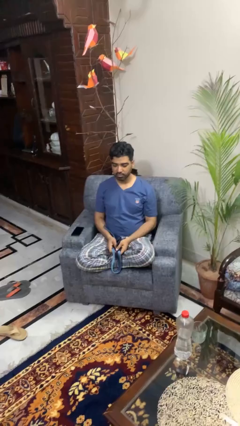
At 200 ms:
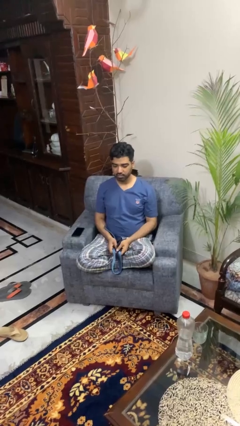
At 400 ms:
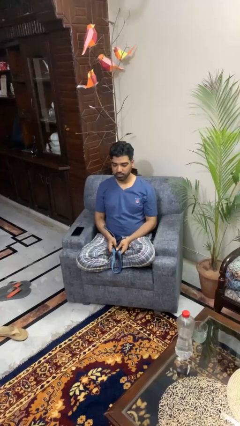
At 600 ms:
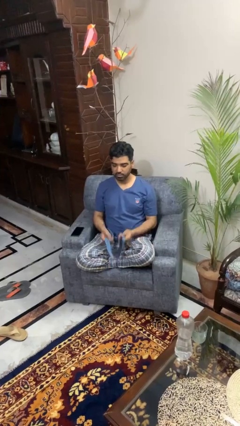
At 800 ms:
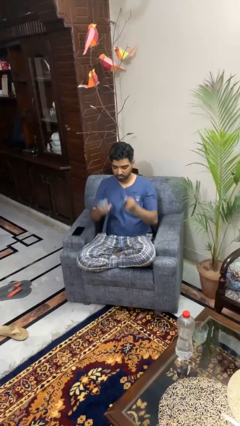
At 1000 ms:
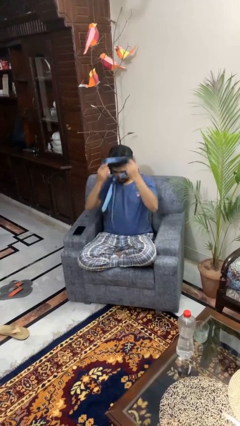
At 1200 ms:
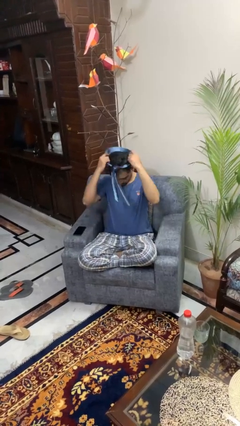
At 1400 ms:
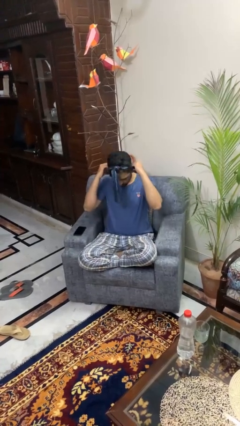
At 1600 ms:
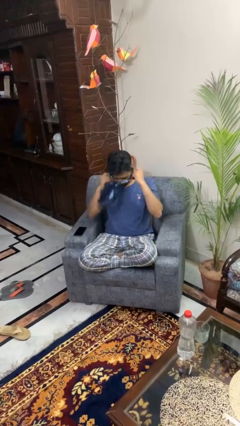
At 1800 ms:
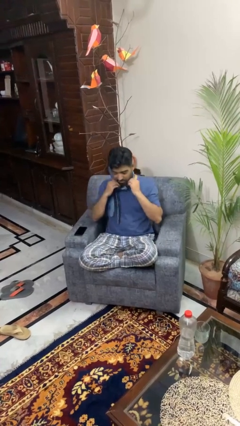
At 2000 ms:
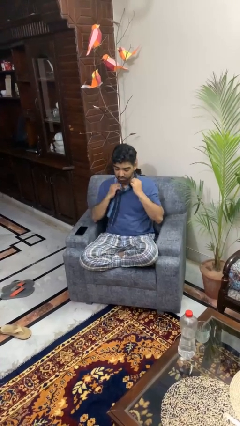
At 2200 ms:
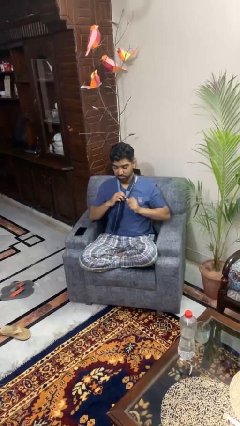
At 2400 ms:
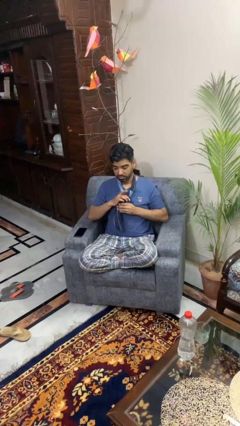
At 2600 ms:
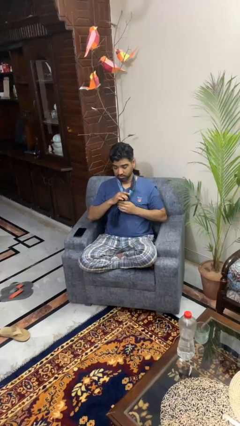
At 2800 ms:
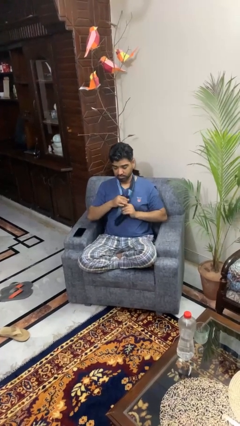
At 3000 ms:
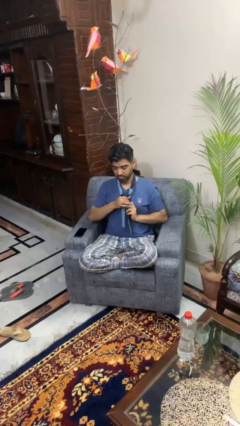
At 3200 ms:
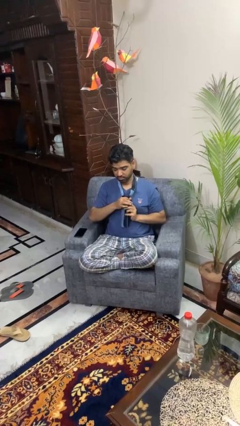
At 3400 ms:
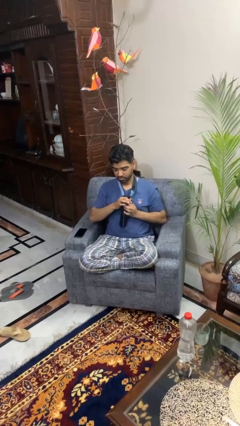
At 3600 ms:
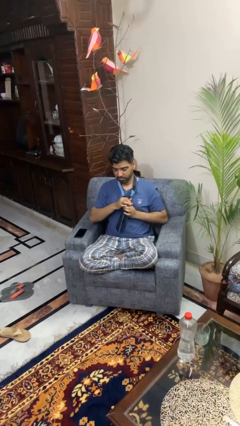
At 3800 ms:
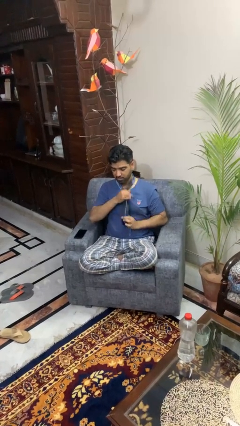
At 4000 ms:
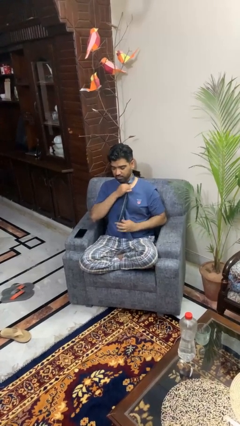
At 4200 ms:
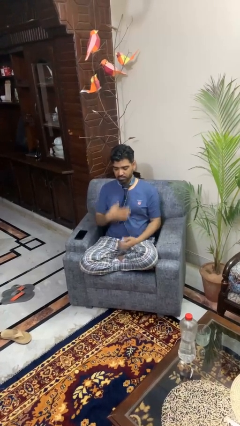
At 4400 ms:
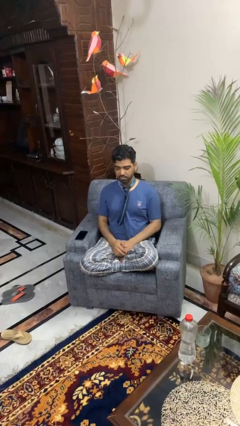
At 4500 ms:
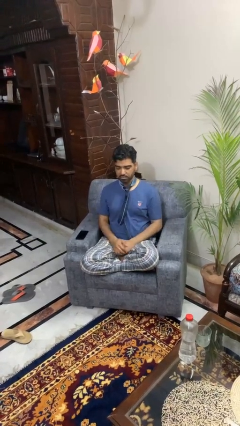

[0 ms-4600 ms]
person puts on necktie

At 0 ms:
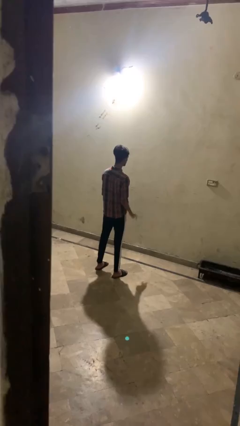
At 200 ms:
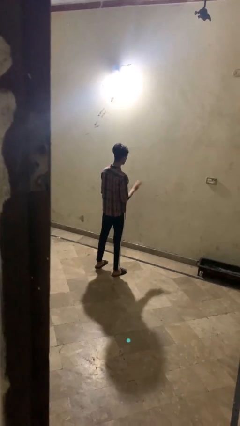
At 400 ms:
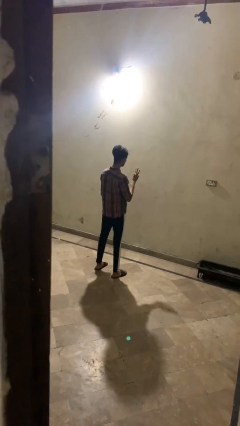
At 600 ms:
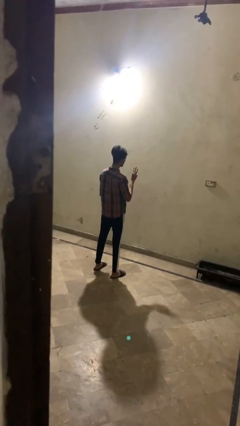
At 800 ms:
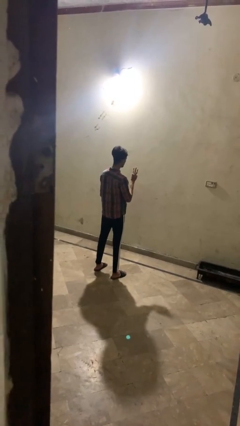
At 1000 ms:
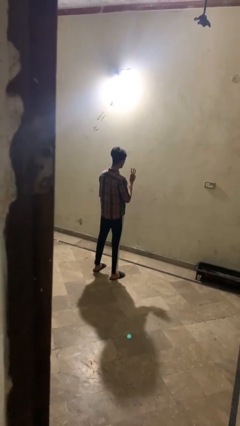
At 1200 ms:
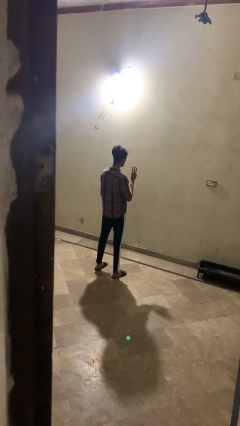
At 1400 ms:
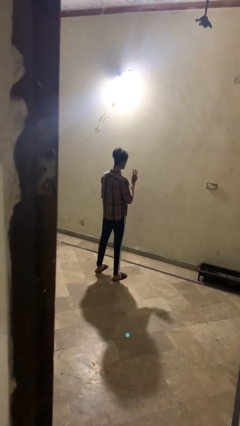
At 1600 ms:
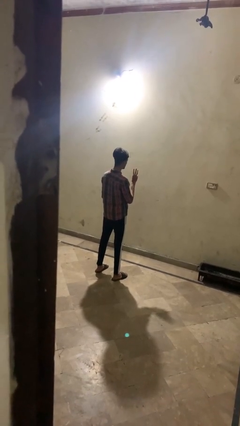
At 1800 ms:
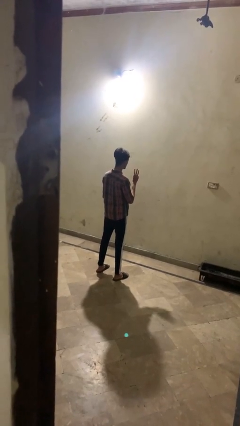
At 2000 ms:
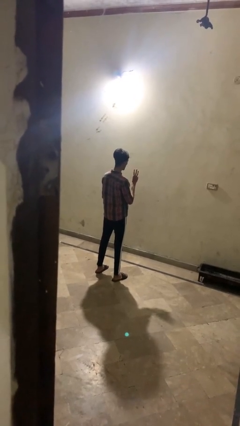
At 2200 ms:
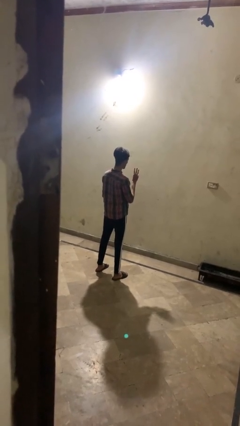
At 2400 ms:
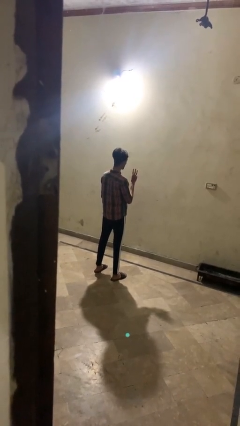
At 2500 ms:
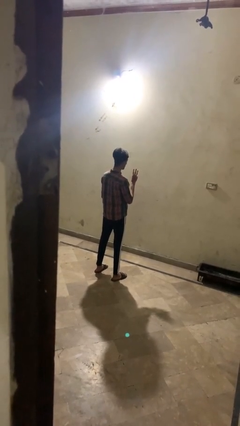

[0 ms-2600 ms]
person gestures number three

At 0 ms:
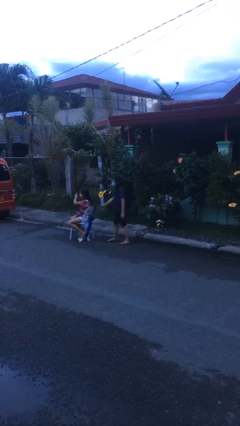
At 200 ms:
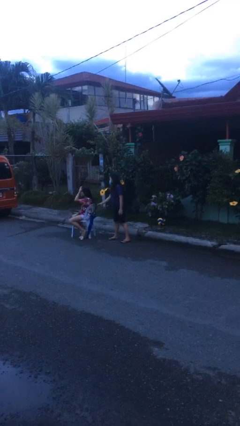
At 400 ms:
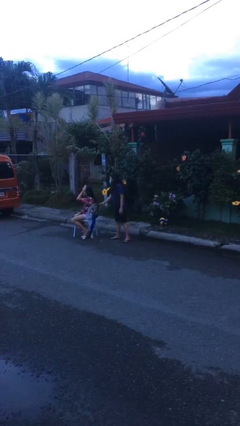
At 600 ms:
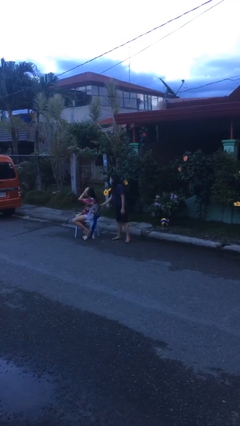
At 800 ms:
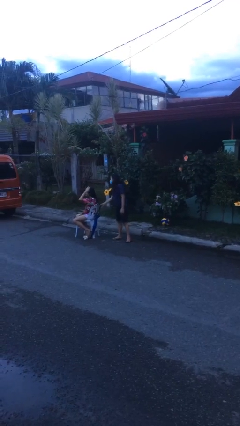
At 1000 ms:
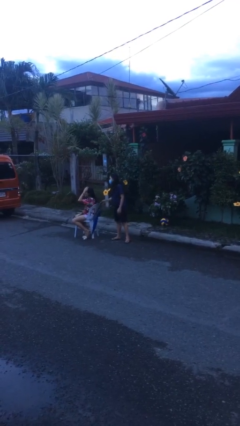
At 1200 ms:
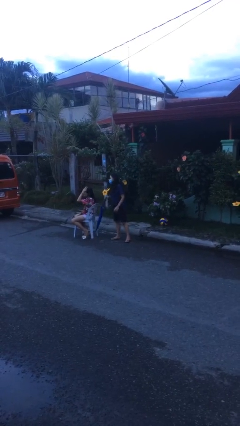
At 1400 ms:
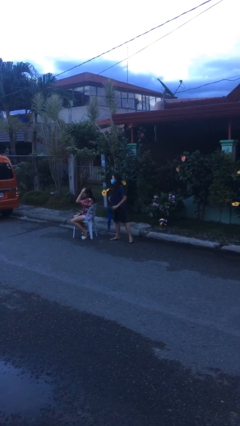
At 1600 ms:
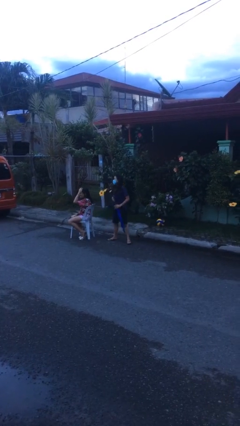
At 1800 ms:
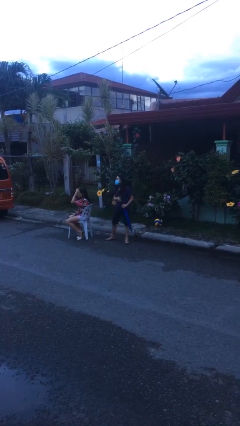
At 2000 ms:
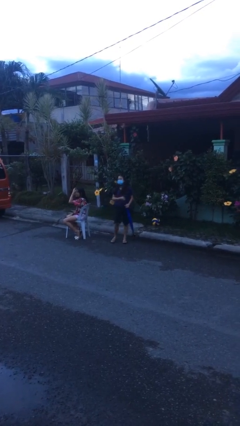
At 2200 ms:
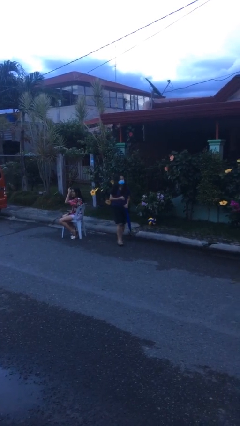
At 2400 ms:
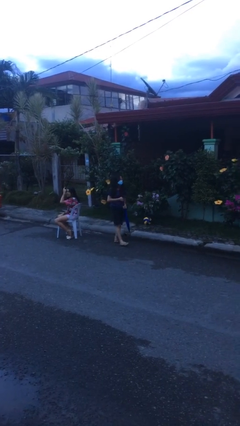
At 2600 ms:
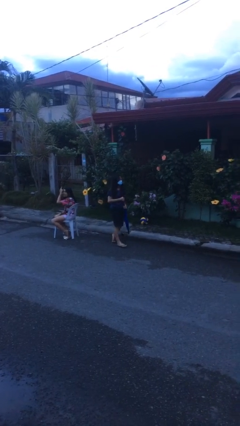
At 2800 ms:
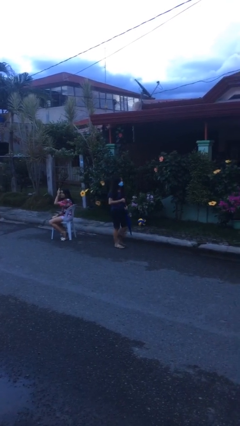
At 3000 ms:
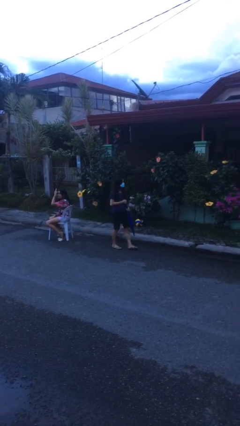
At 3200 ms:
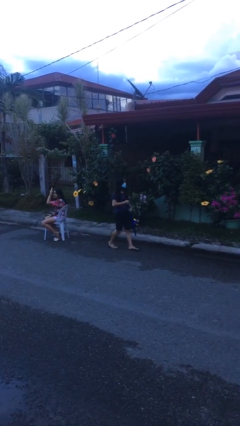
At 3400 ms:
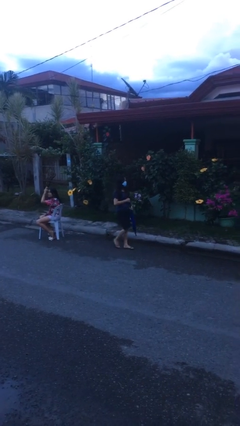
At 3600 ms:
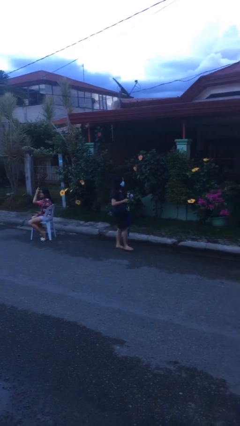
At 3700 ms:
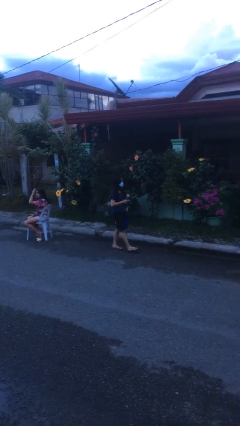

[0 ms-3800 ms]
person steals object from person

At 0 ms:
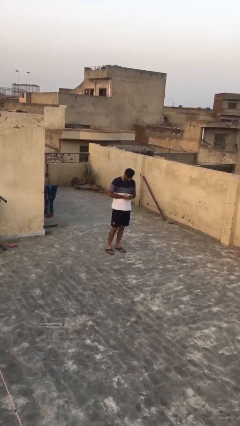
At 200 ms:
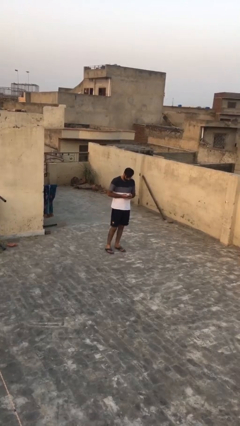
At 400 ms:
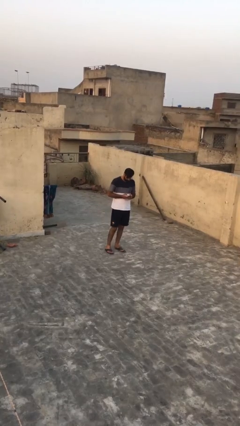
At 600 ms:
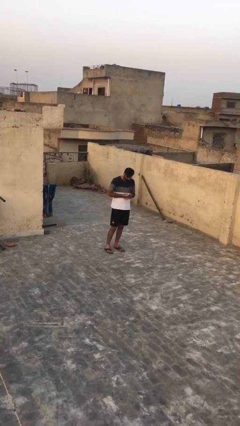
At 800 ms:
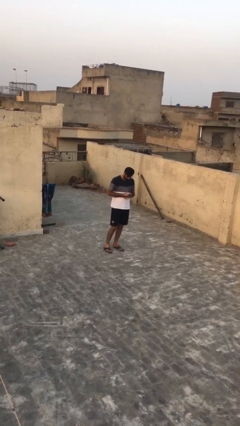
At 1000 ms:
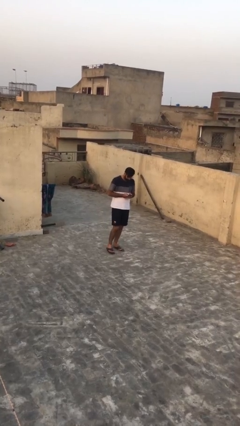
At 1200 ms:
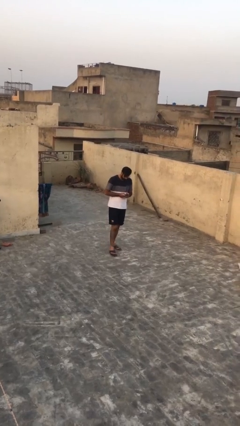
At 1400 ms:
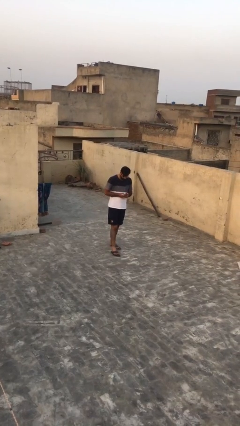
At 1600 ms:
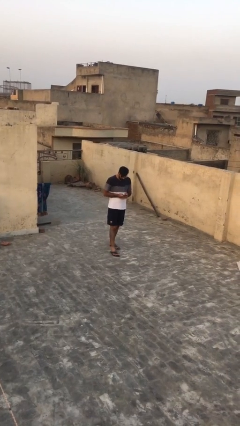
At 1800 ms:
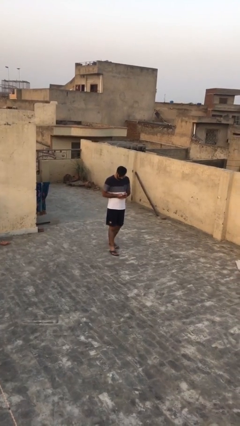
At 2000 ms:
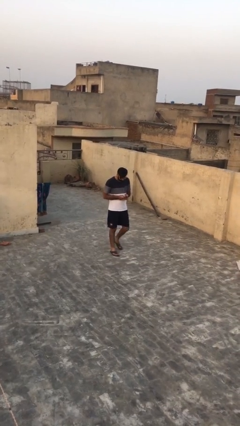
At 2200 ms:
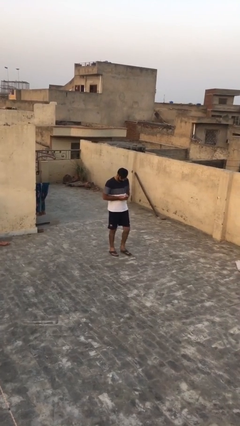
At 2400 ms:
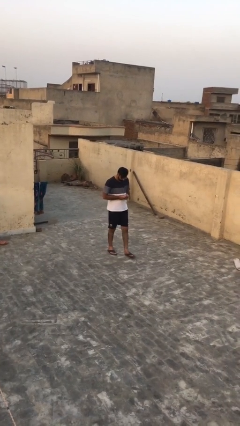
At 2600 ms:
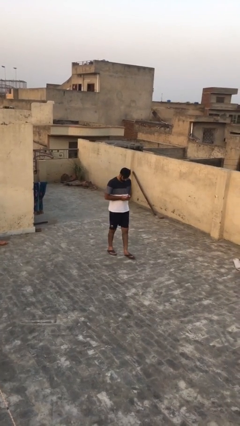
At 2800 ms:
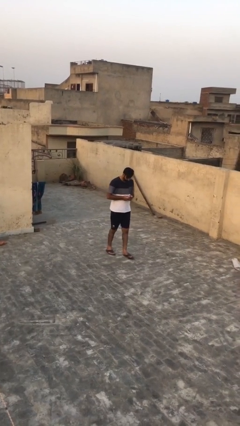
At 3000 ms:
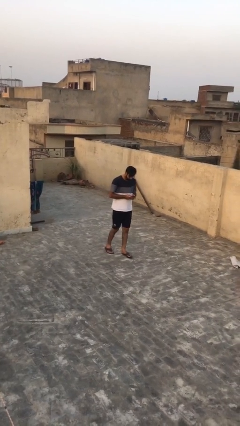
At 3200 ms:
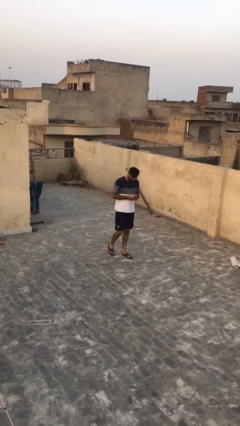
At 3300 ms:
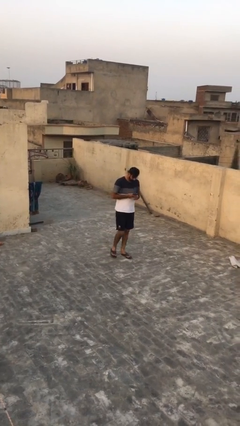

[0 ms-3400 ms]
person texts on phone

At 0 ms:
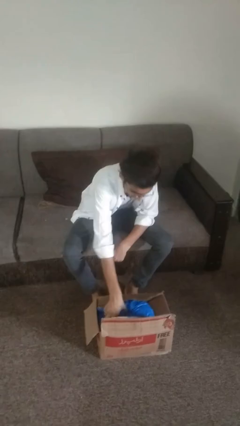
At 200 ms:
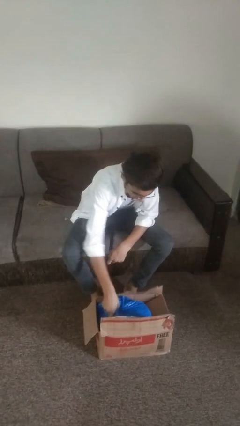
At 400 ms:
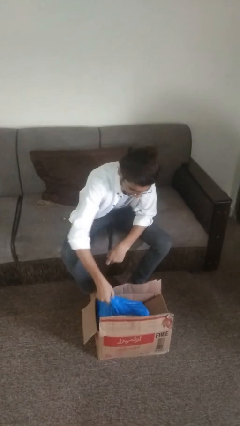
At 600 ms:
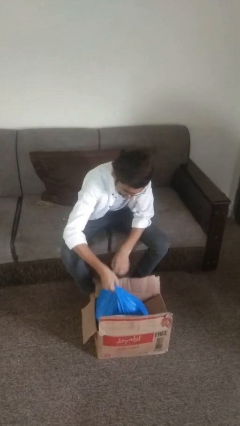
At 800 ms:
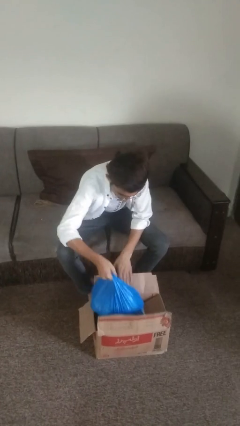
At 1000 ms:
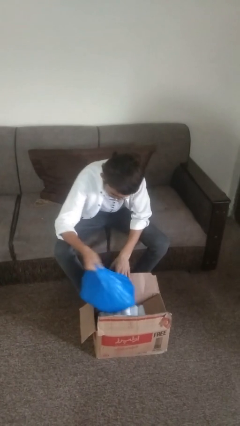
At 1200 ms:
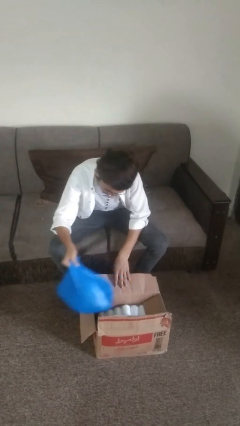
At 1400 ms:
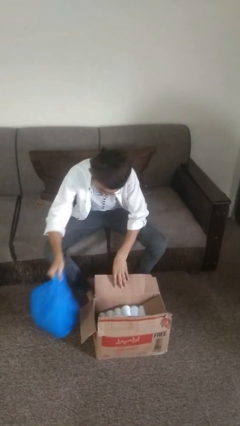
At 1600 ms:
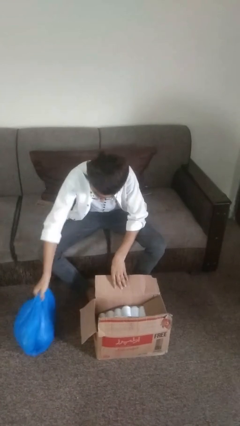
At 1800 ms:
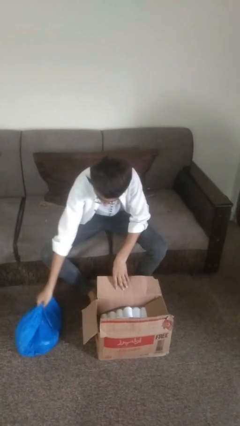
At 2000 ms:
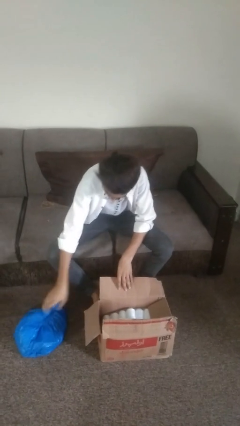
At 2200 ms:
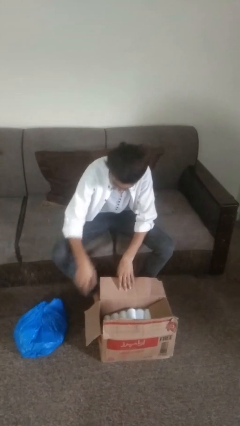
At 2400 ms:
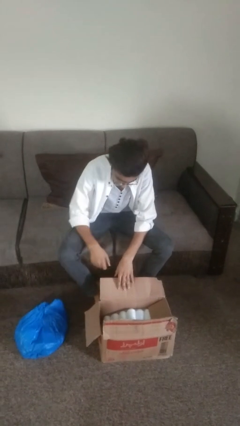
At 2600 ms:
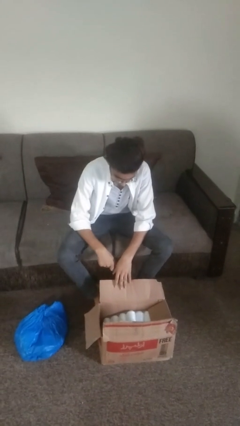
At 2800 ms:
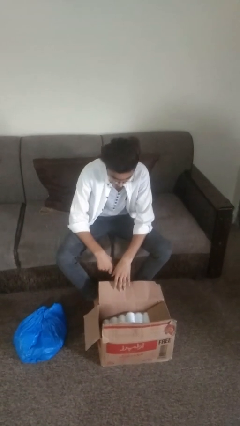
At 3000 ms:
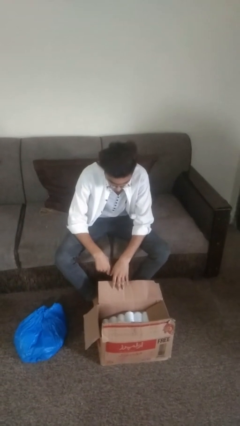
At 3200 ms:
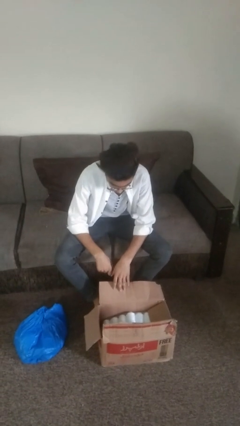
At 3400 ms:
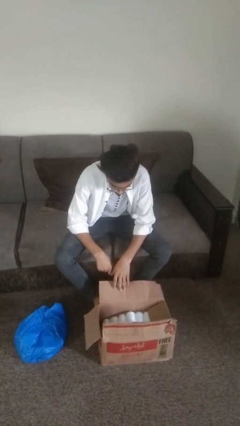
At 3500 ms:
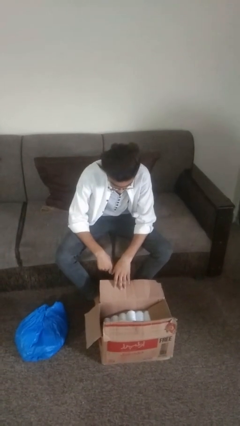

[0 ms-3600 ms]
person takes object from box
